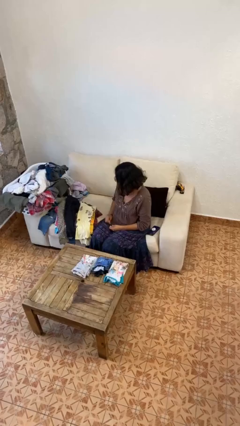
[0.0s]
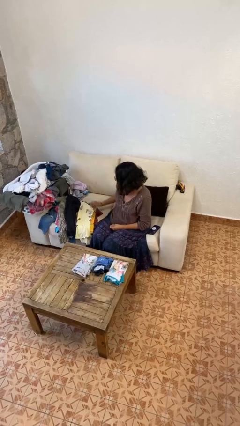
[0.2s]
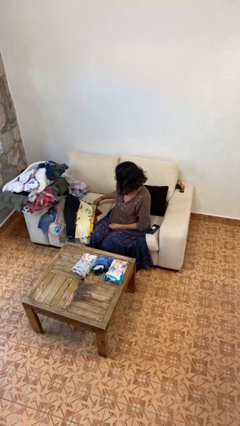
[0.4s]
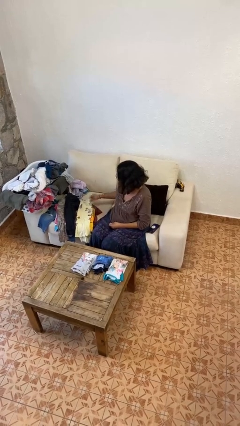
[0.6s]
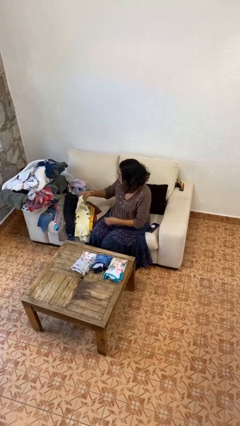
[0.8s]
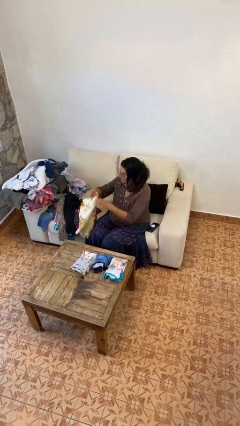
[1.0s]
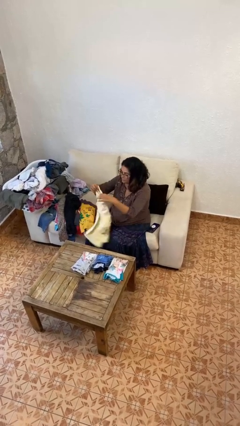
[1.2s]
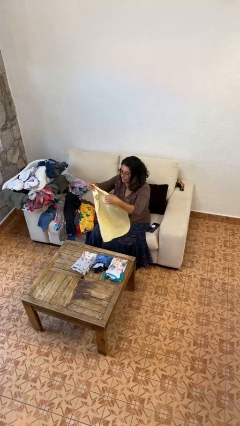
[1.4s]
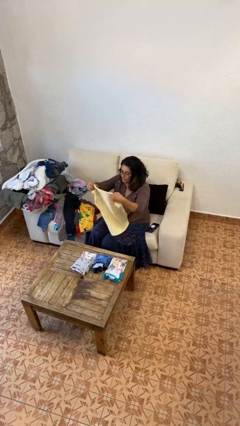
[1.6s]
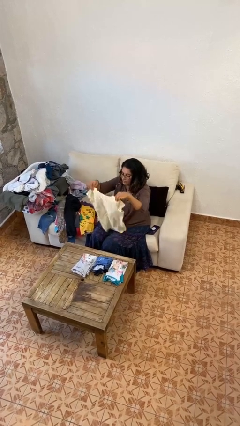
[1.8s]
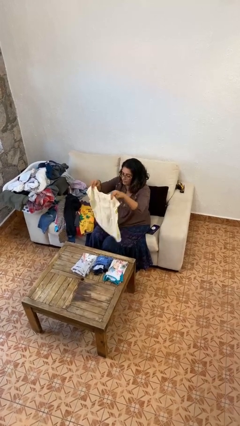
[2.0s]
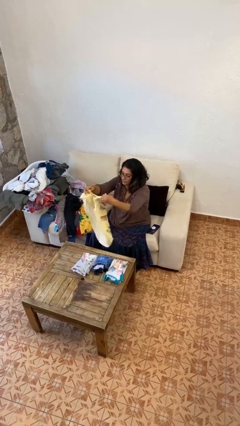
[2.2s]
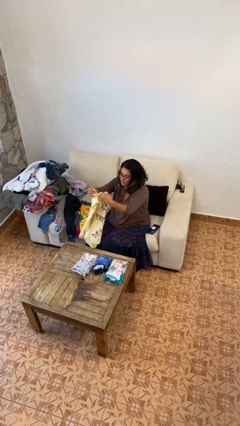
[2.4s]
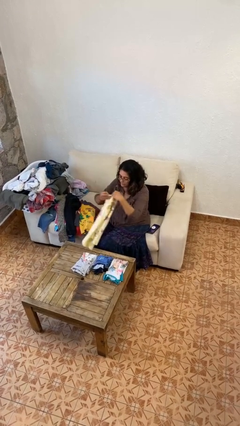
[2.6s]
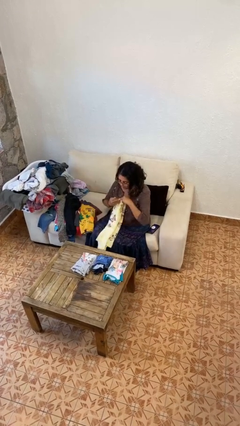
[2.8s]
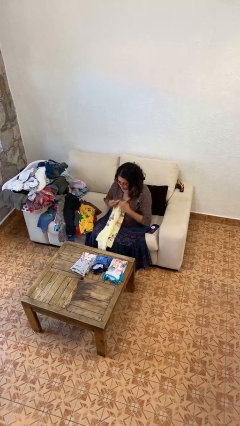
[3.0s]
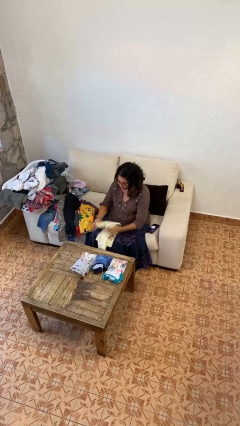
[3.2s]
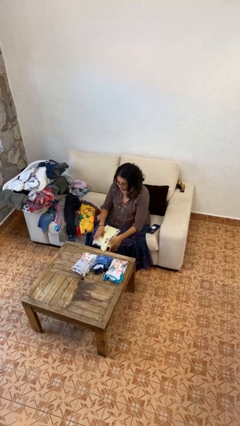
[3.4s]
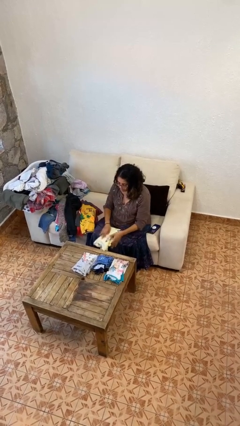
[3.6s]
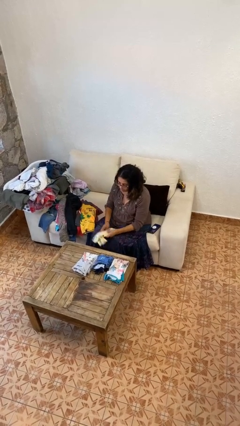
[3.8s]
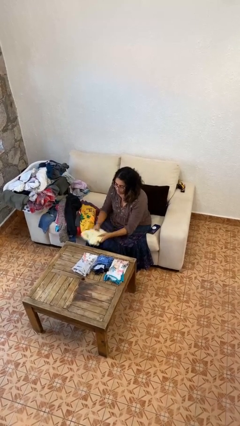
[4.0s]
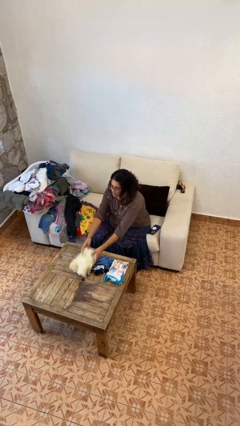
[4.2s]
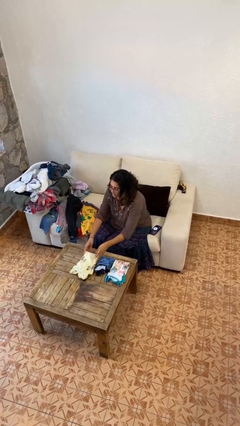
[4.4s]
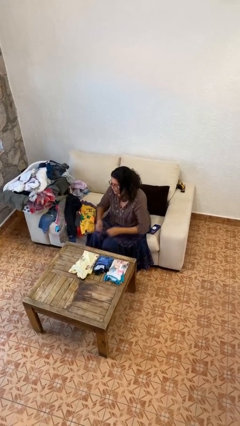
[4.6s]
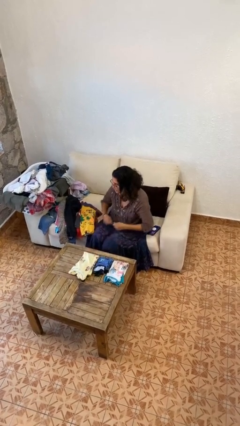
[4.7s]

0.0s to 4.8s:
person folds shirt

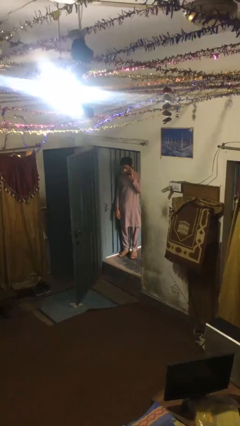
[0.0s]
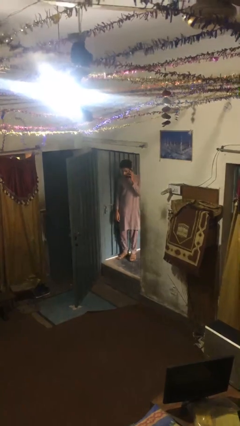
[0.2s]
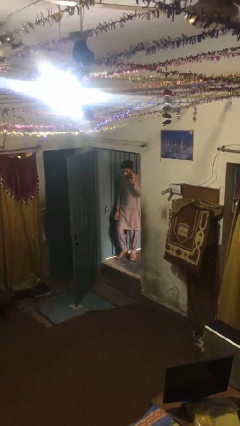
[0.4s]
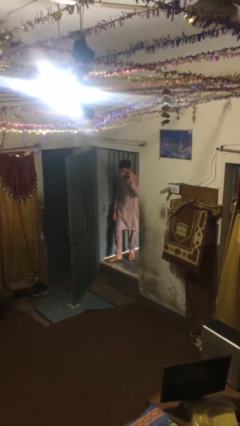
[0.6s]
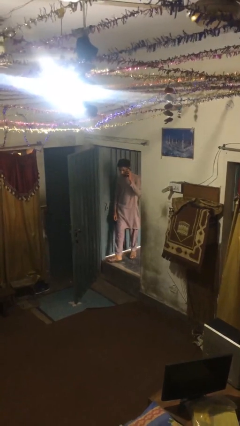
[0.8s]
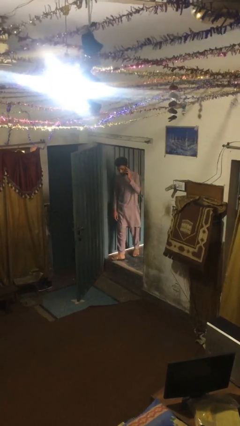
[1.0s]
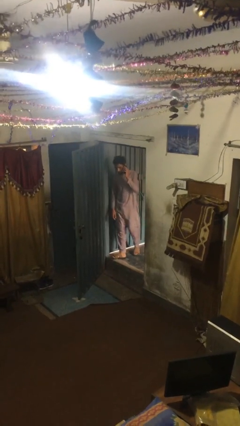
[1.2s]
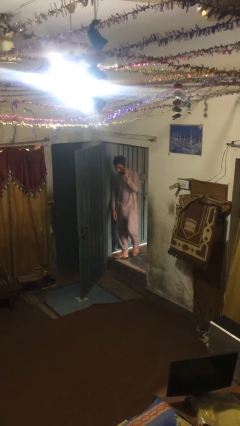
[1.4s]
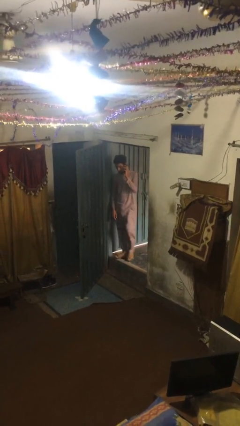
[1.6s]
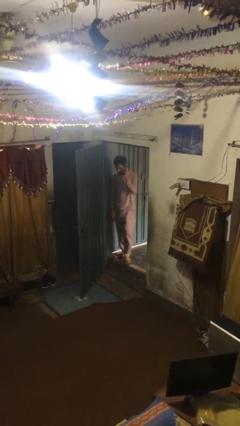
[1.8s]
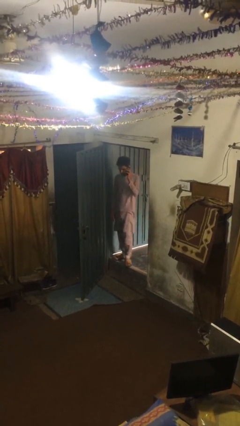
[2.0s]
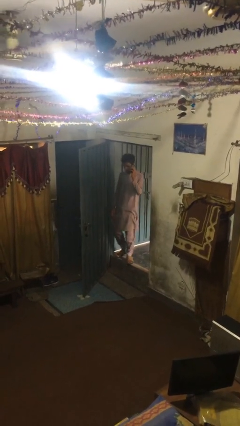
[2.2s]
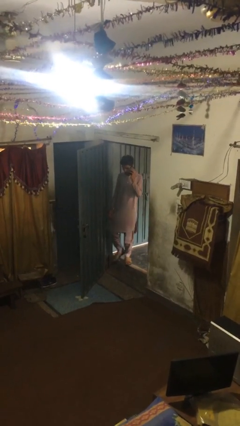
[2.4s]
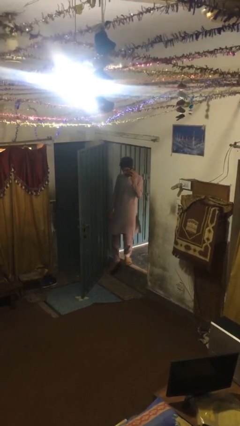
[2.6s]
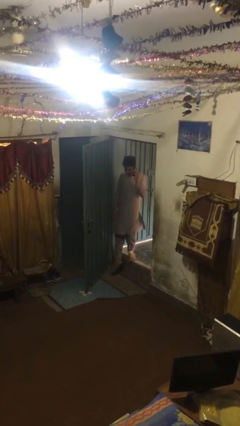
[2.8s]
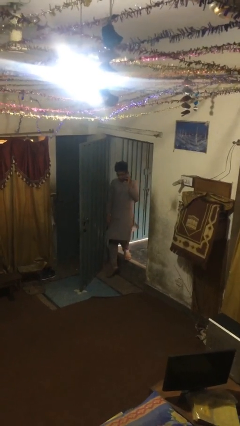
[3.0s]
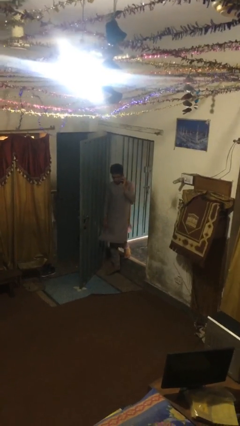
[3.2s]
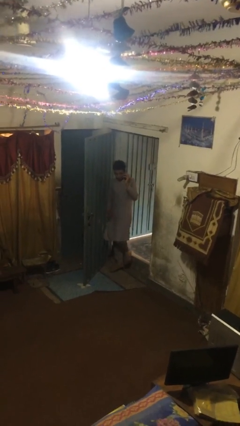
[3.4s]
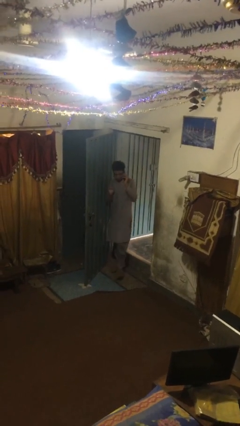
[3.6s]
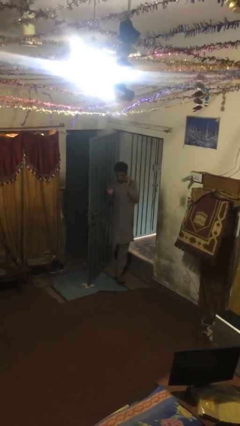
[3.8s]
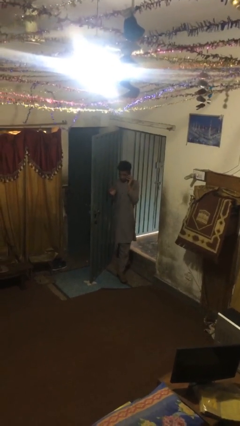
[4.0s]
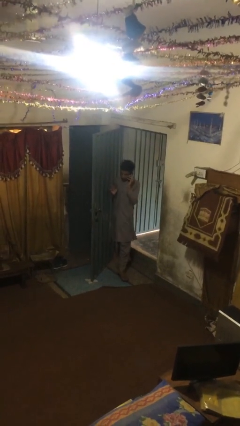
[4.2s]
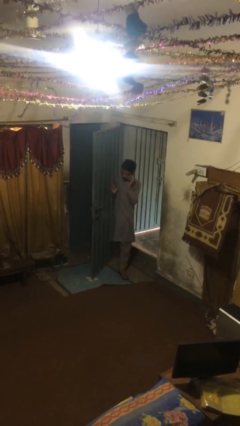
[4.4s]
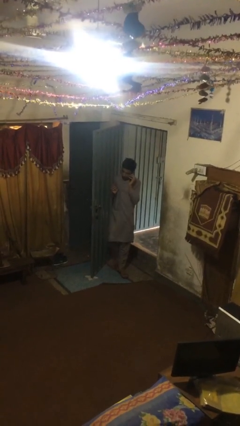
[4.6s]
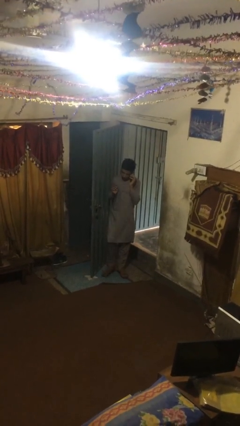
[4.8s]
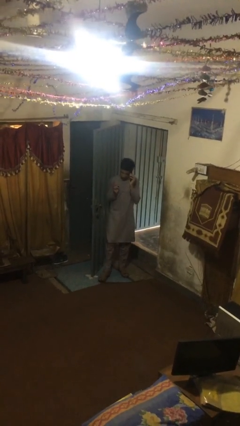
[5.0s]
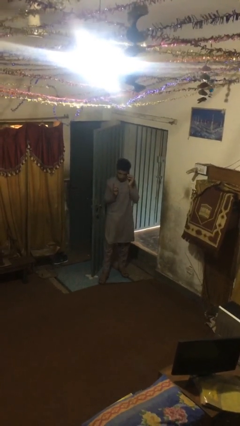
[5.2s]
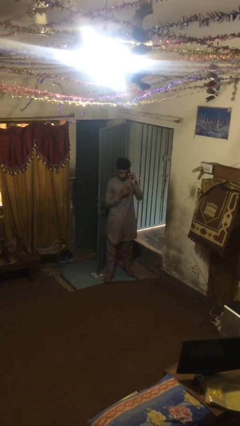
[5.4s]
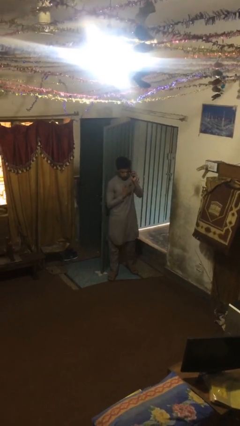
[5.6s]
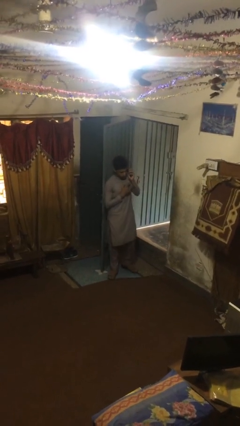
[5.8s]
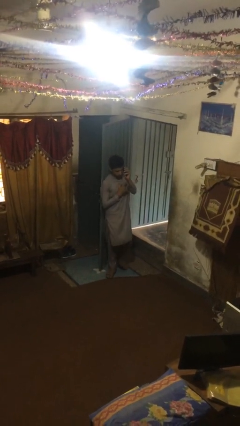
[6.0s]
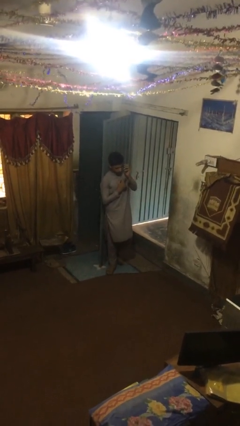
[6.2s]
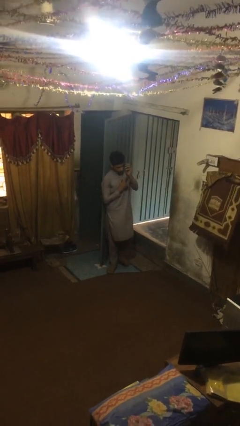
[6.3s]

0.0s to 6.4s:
person enters scene through structure

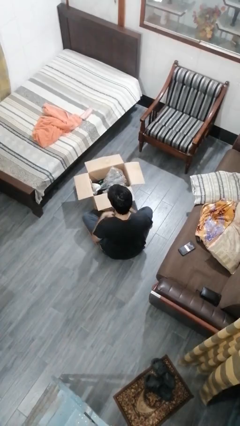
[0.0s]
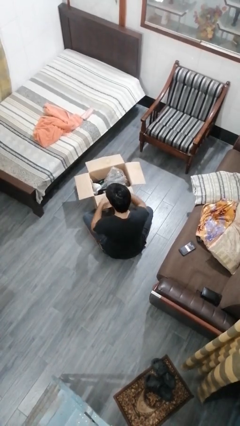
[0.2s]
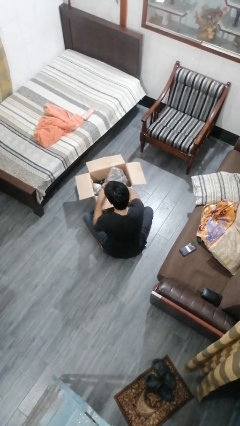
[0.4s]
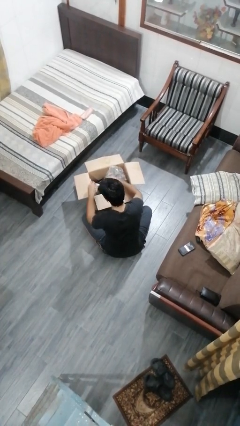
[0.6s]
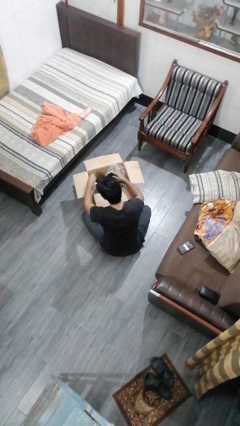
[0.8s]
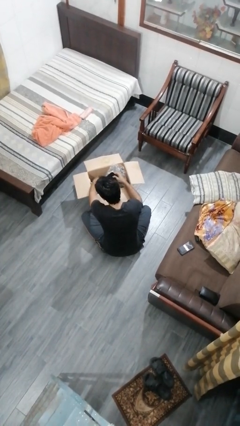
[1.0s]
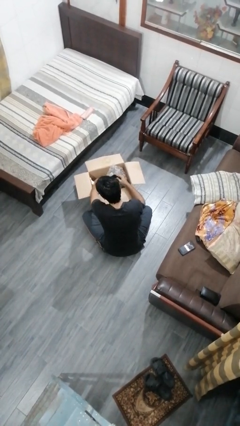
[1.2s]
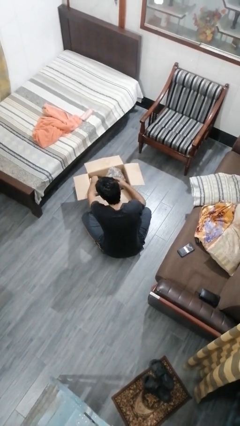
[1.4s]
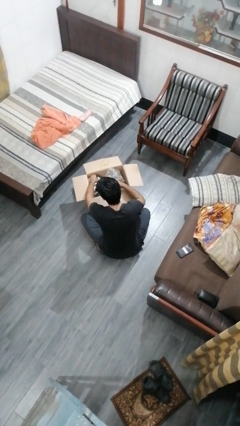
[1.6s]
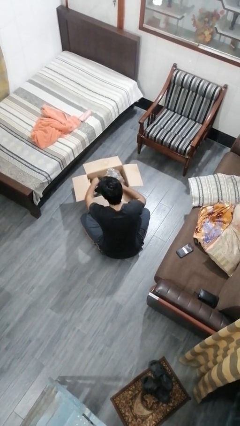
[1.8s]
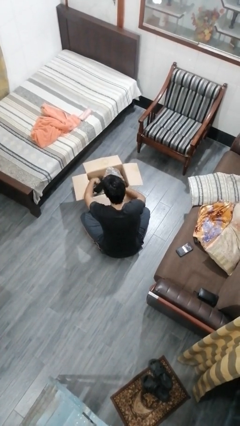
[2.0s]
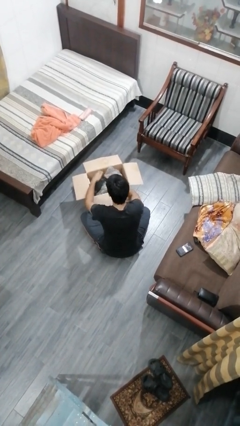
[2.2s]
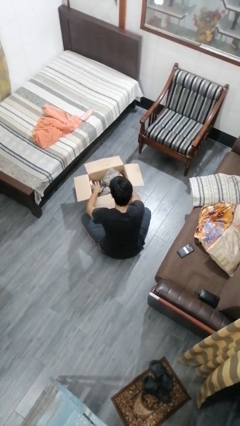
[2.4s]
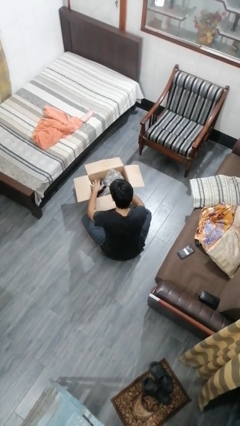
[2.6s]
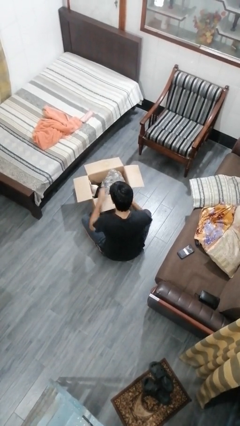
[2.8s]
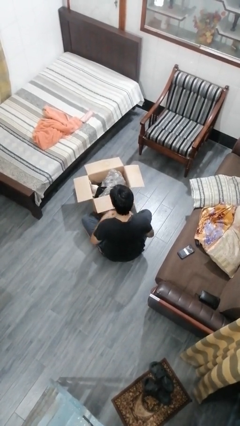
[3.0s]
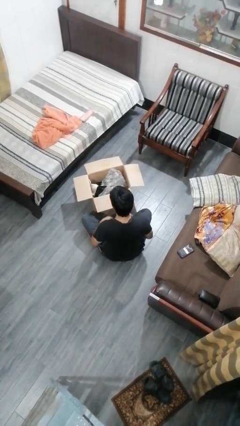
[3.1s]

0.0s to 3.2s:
person searches in box

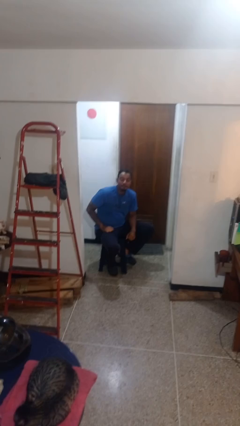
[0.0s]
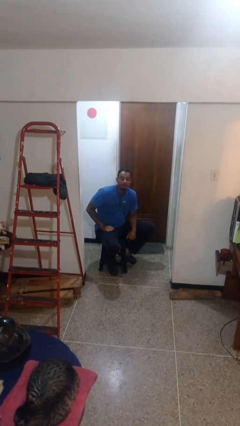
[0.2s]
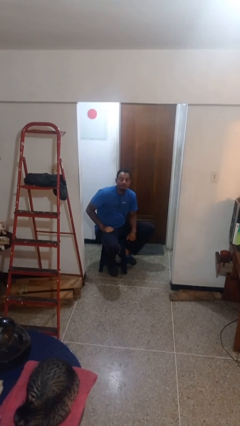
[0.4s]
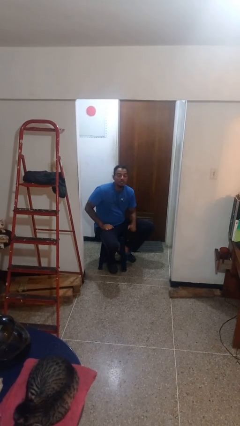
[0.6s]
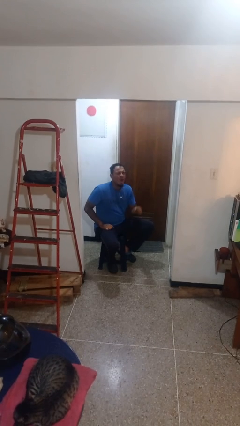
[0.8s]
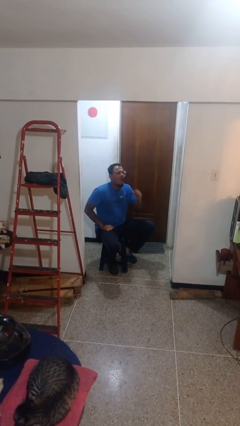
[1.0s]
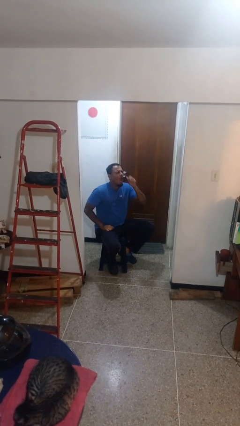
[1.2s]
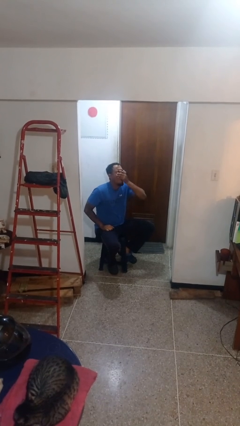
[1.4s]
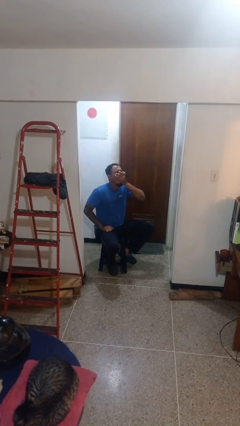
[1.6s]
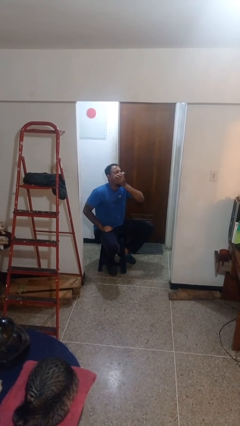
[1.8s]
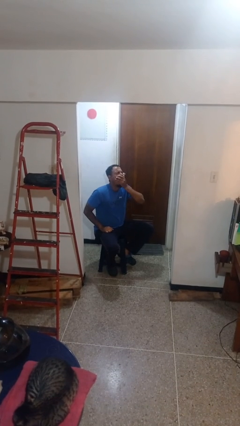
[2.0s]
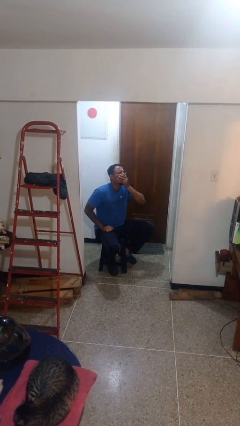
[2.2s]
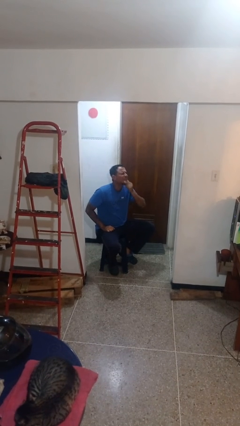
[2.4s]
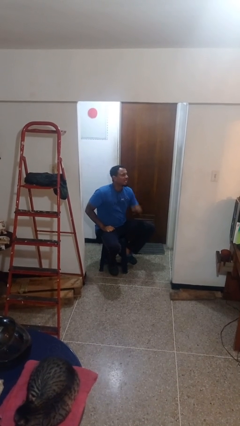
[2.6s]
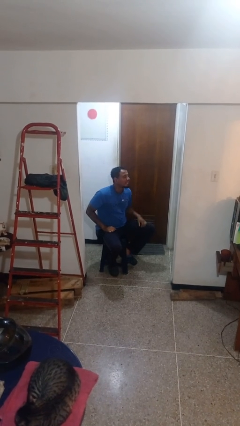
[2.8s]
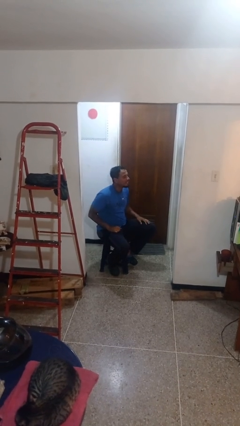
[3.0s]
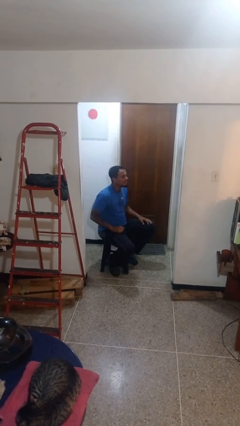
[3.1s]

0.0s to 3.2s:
person yawns

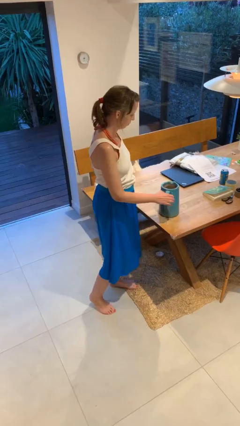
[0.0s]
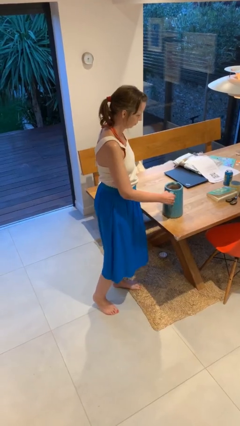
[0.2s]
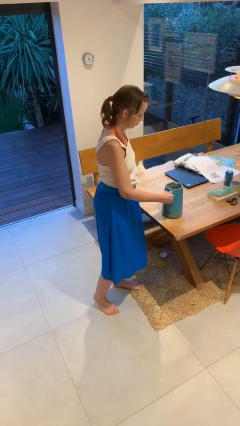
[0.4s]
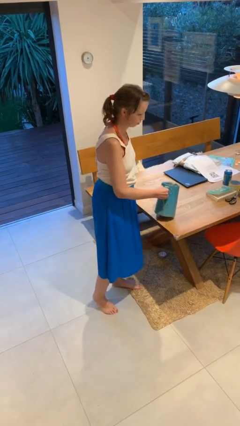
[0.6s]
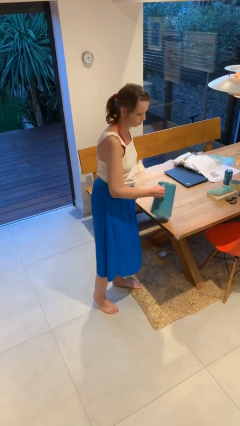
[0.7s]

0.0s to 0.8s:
person picks up object from table
